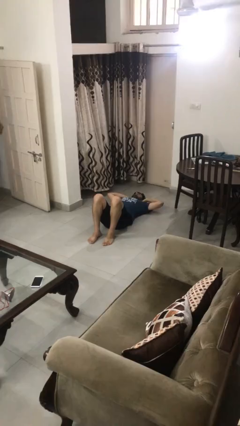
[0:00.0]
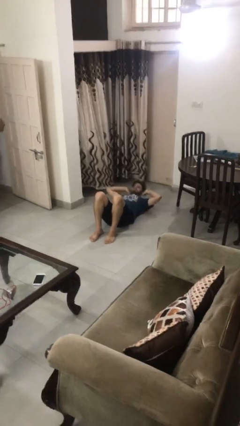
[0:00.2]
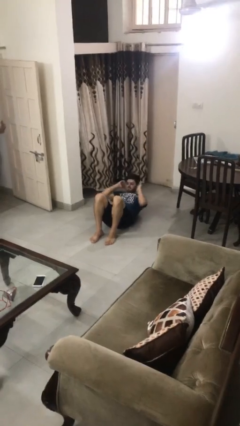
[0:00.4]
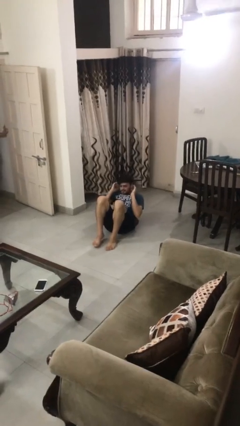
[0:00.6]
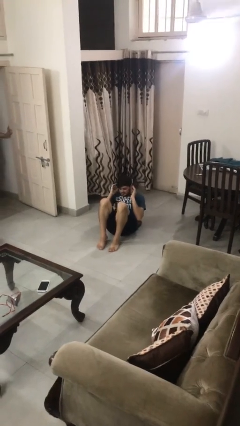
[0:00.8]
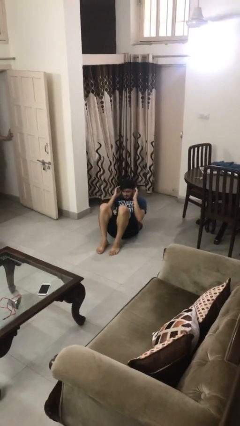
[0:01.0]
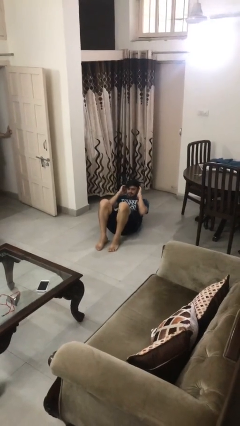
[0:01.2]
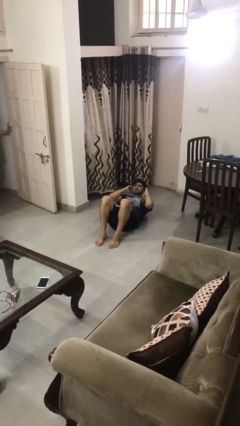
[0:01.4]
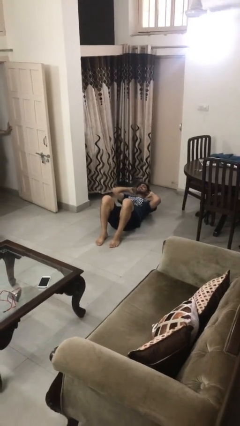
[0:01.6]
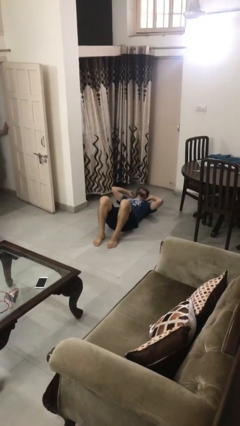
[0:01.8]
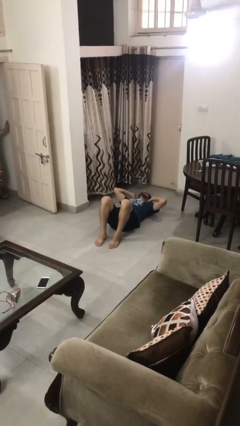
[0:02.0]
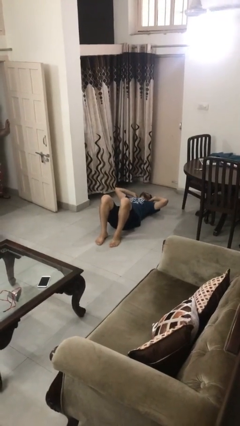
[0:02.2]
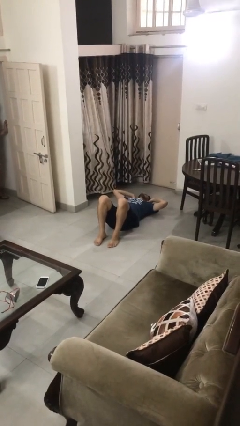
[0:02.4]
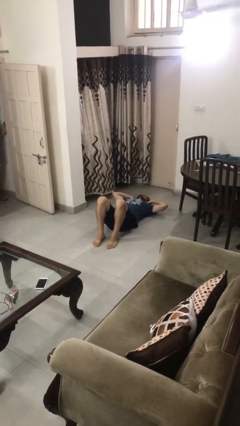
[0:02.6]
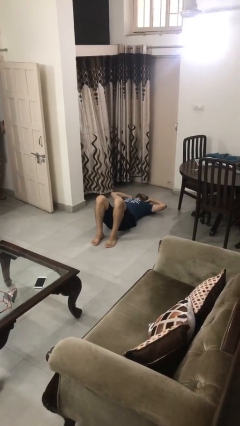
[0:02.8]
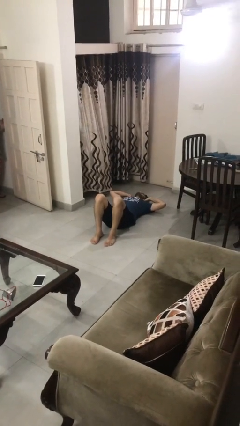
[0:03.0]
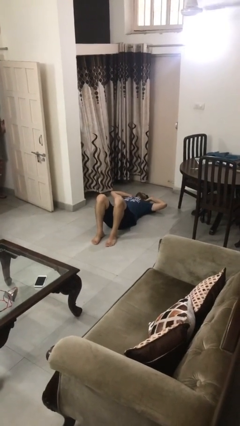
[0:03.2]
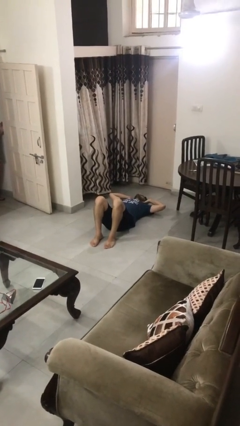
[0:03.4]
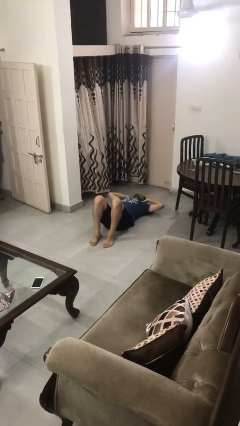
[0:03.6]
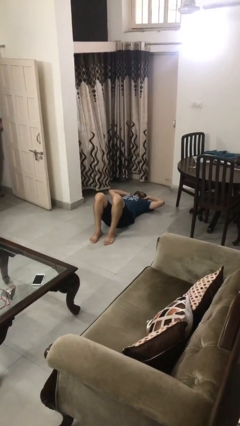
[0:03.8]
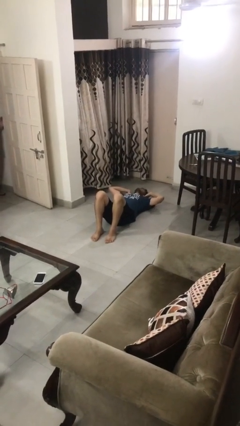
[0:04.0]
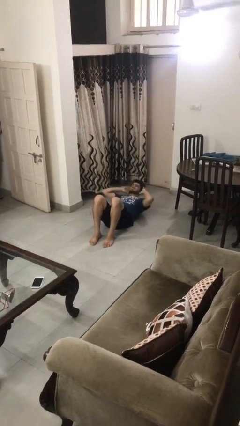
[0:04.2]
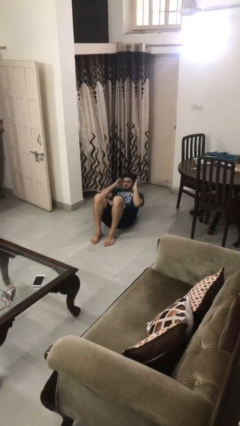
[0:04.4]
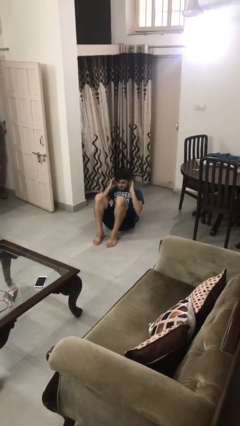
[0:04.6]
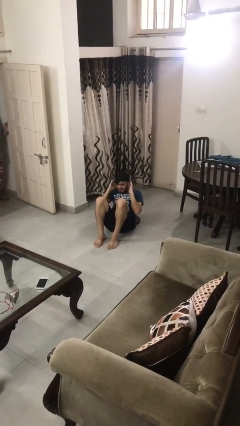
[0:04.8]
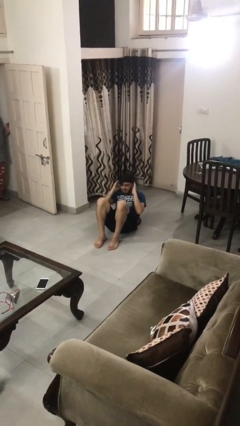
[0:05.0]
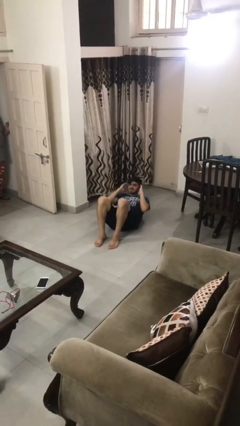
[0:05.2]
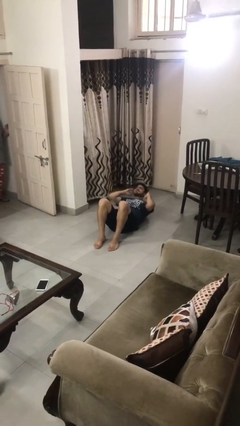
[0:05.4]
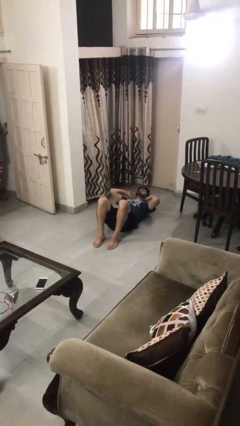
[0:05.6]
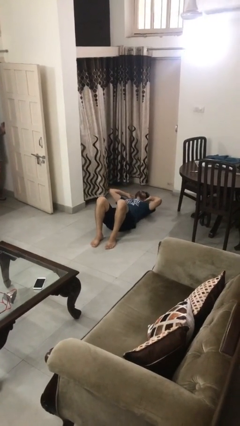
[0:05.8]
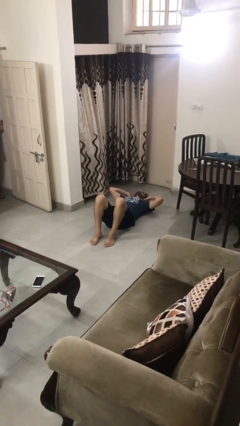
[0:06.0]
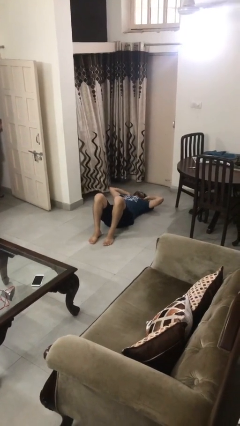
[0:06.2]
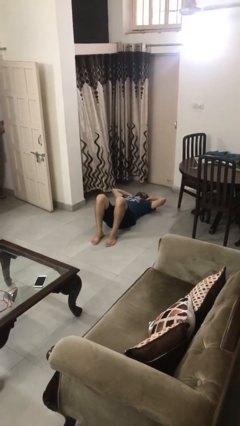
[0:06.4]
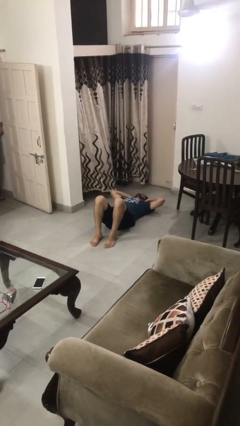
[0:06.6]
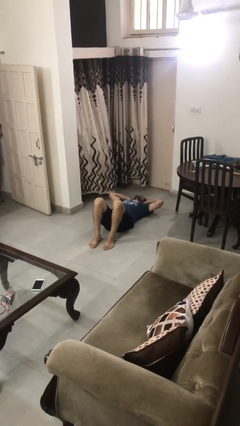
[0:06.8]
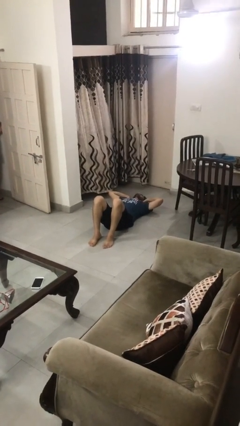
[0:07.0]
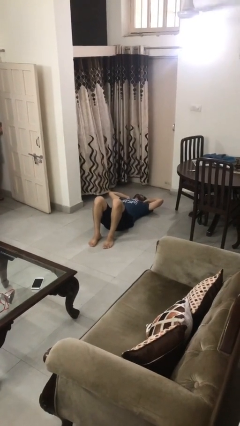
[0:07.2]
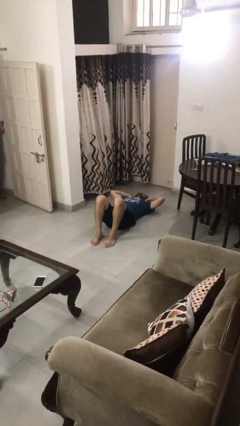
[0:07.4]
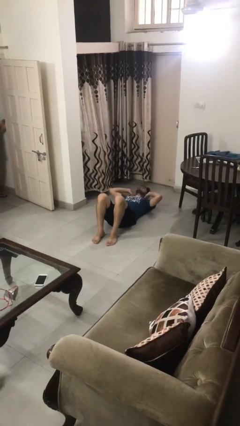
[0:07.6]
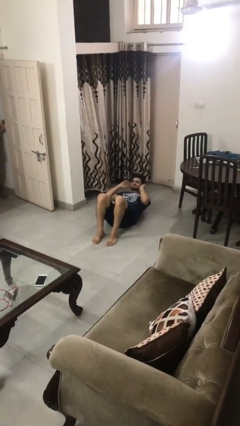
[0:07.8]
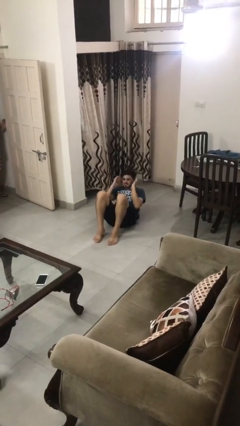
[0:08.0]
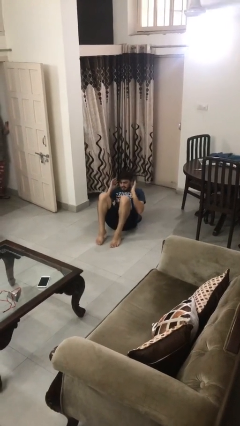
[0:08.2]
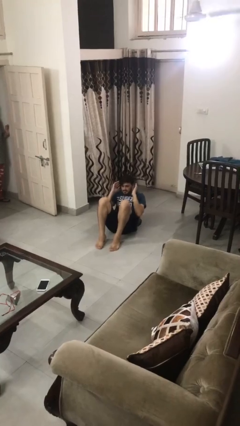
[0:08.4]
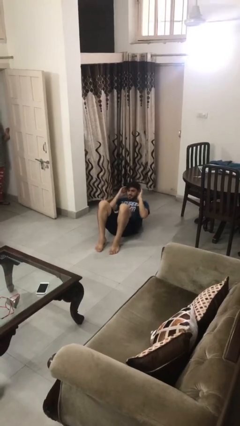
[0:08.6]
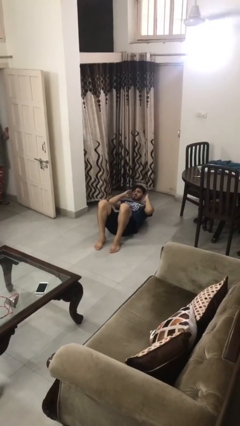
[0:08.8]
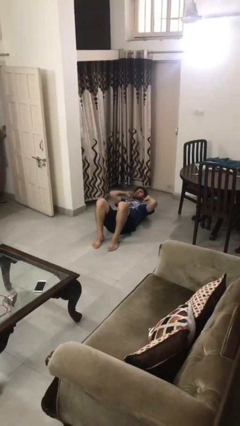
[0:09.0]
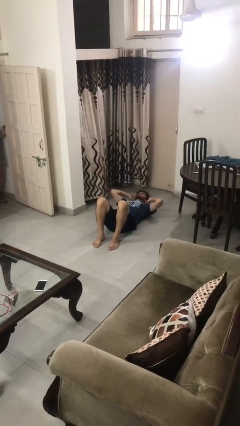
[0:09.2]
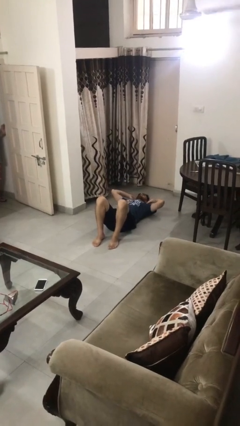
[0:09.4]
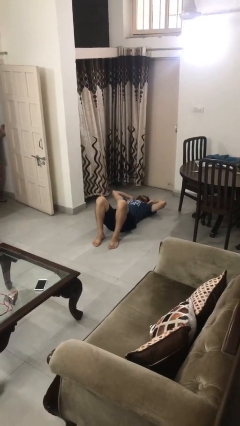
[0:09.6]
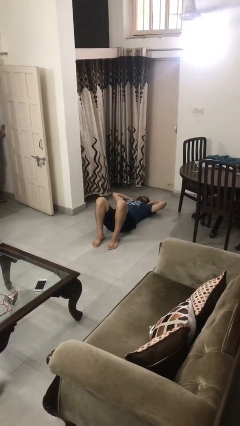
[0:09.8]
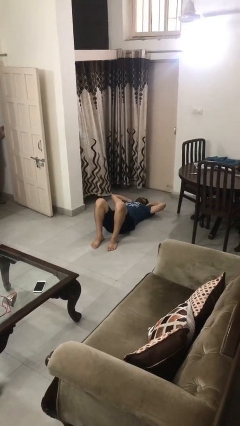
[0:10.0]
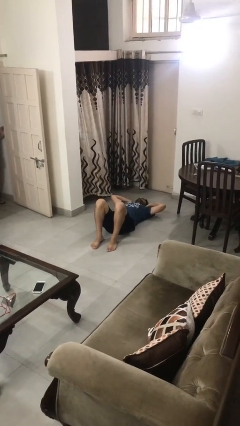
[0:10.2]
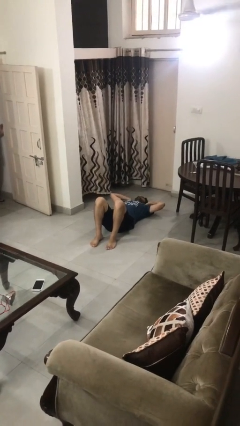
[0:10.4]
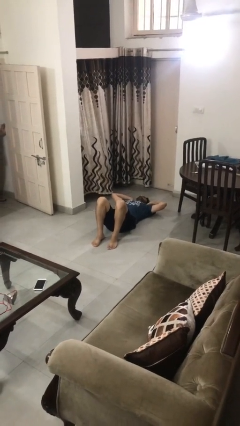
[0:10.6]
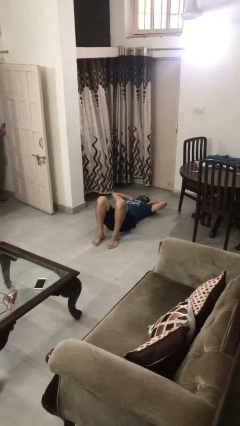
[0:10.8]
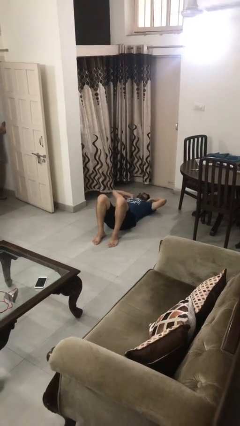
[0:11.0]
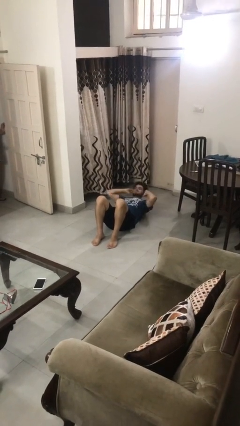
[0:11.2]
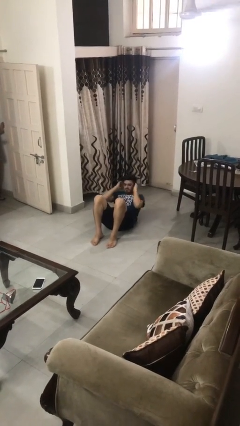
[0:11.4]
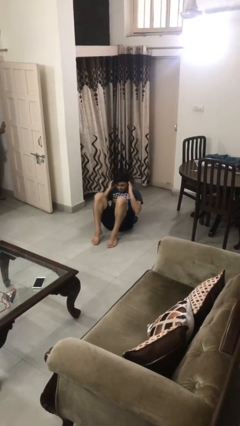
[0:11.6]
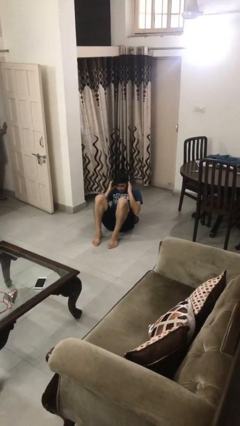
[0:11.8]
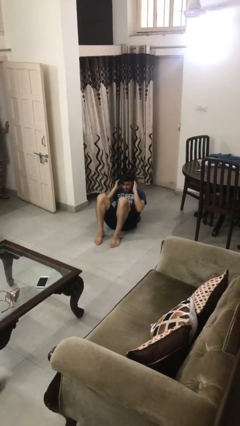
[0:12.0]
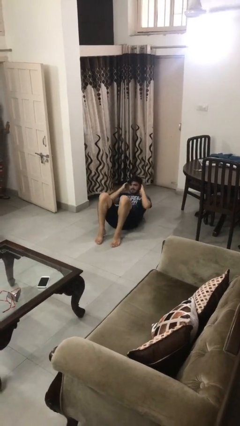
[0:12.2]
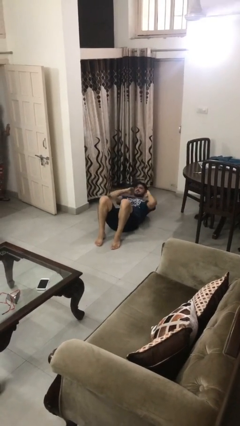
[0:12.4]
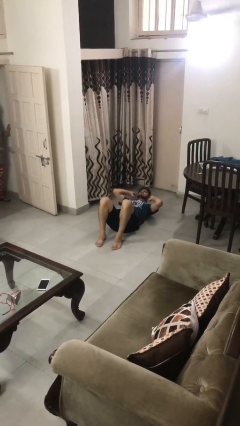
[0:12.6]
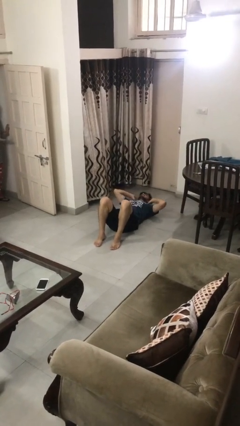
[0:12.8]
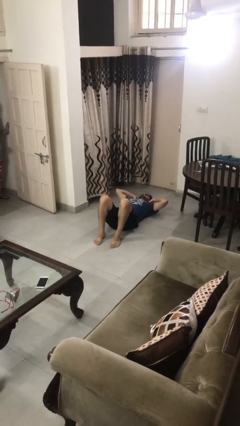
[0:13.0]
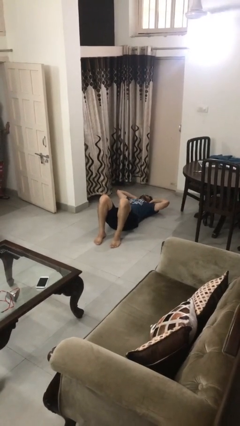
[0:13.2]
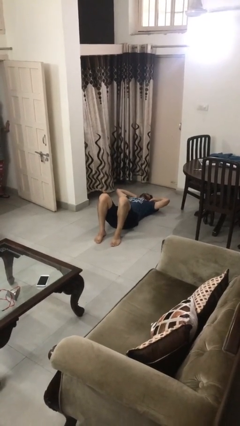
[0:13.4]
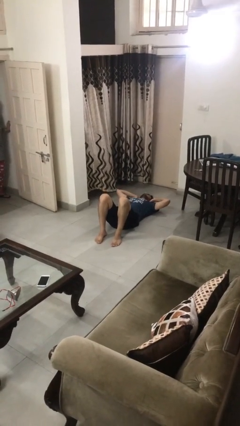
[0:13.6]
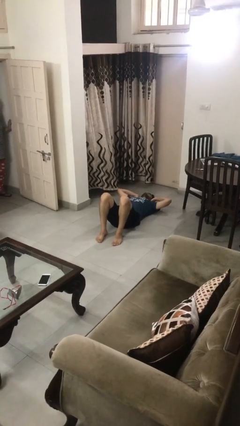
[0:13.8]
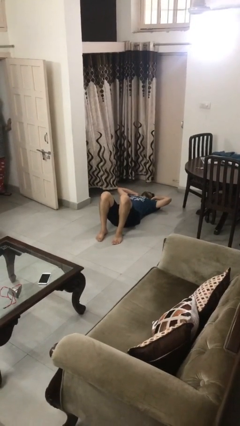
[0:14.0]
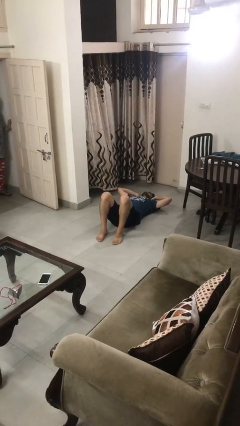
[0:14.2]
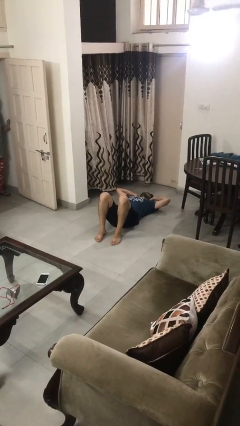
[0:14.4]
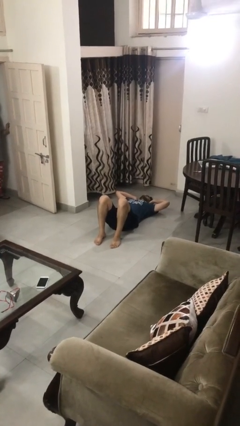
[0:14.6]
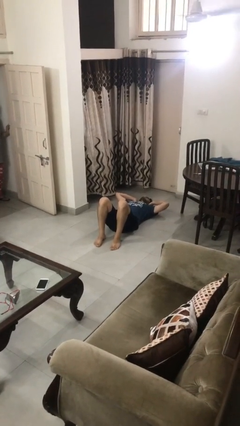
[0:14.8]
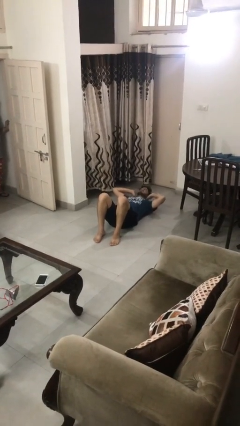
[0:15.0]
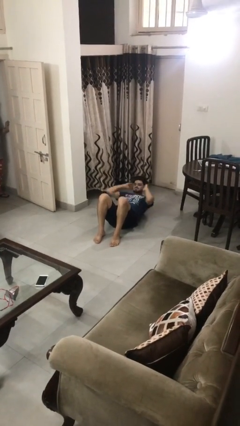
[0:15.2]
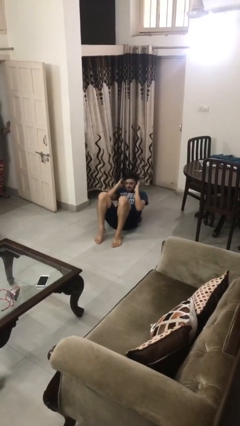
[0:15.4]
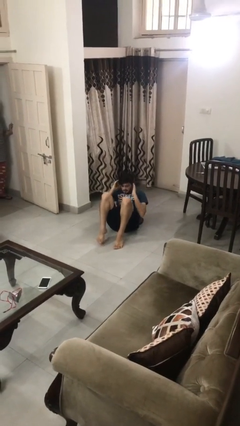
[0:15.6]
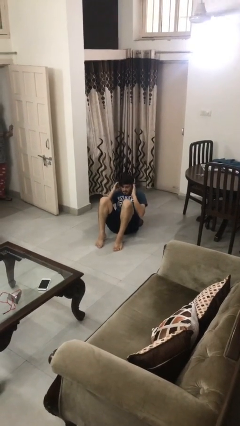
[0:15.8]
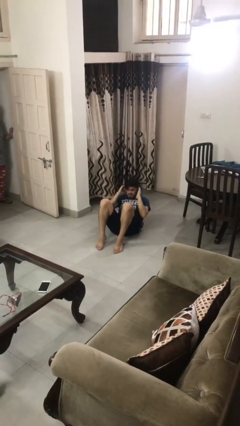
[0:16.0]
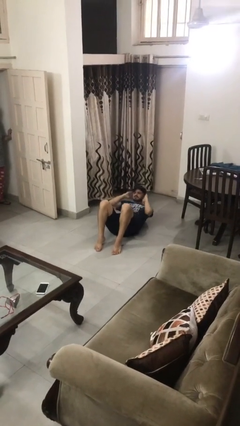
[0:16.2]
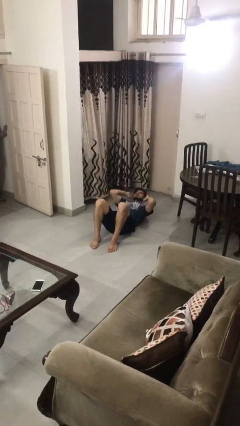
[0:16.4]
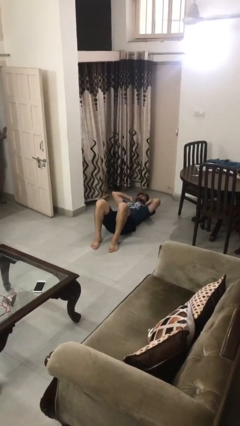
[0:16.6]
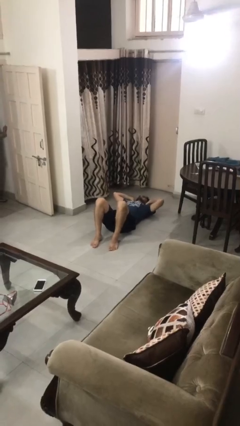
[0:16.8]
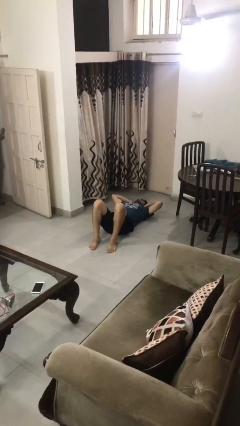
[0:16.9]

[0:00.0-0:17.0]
person exercises with situp

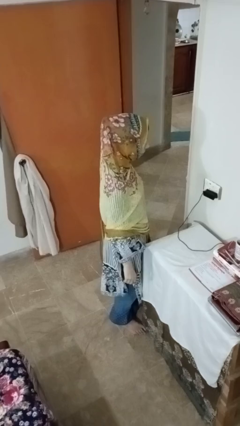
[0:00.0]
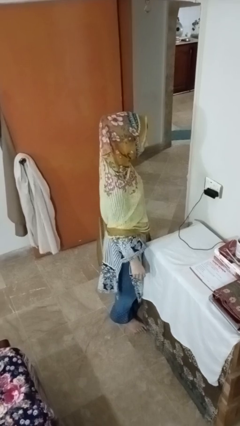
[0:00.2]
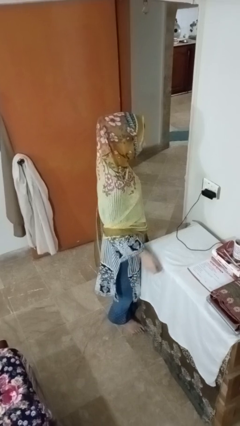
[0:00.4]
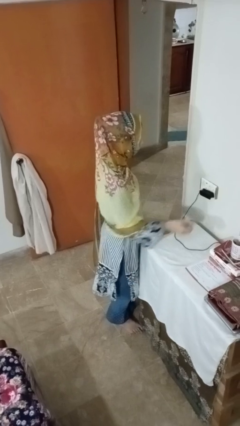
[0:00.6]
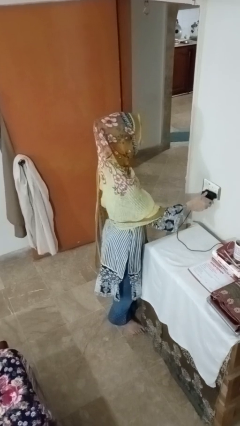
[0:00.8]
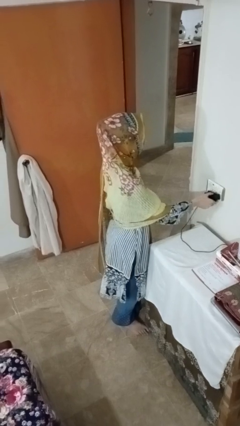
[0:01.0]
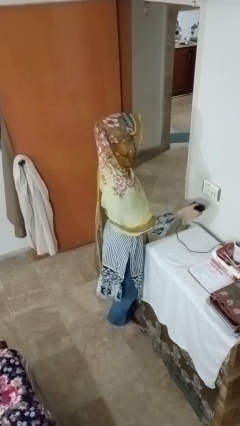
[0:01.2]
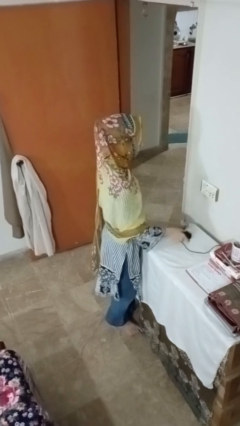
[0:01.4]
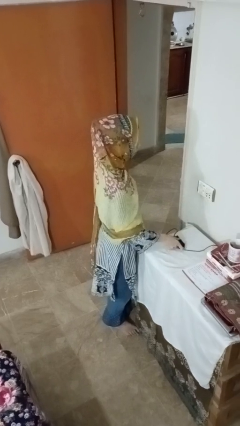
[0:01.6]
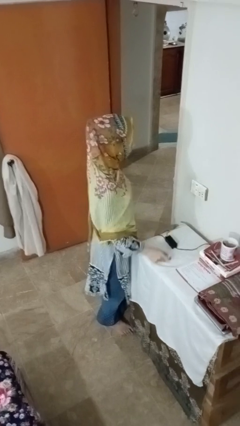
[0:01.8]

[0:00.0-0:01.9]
person unplugs from electrical socket
